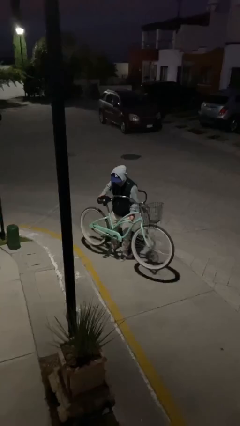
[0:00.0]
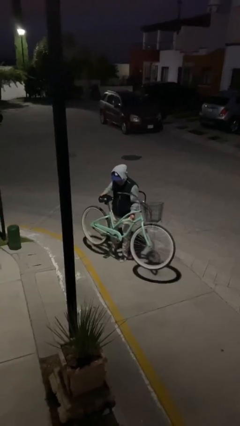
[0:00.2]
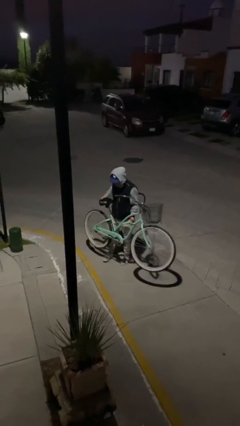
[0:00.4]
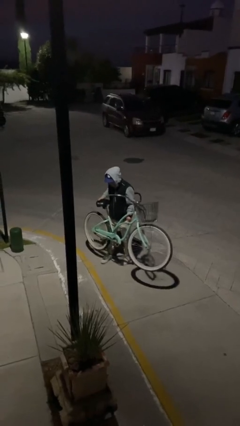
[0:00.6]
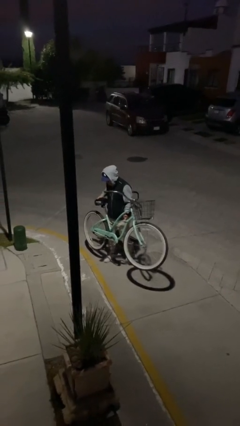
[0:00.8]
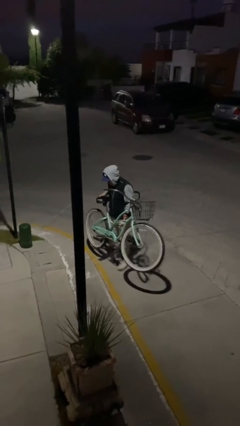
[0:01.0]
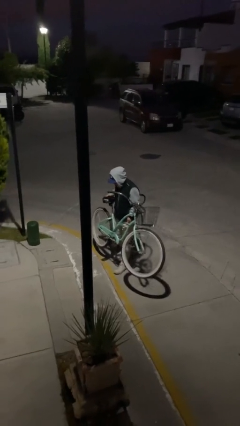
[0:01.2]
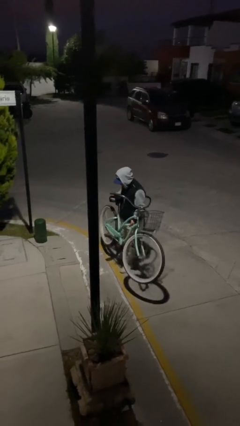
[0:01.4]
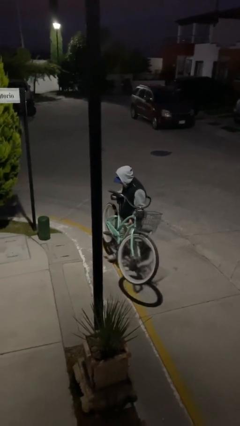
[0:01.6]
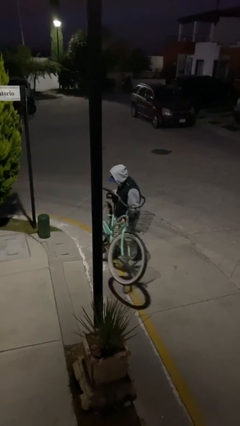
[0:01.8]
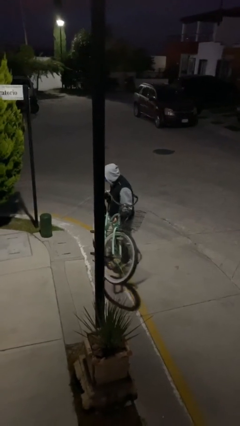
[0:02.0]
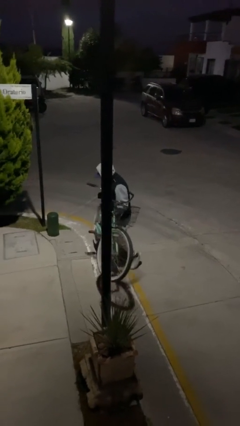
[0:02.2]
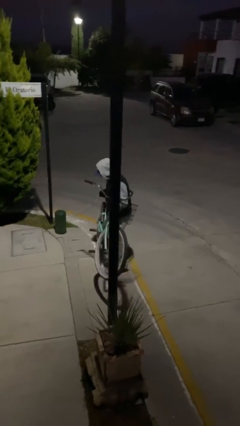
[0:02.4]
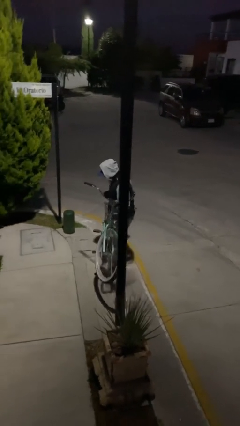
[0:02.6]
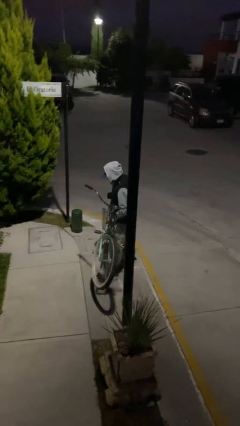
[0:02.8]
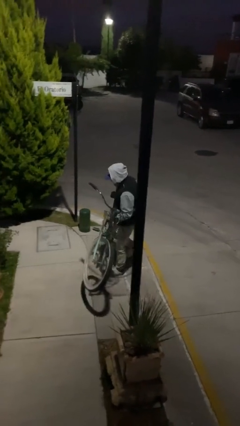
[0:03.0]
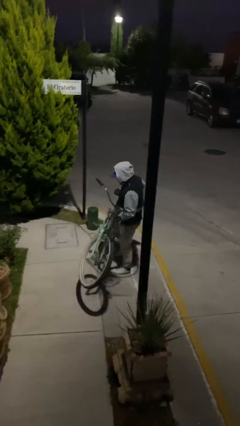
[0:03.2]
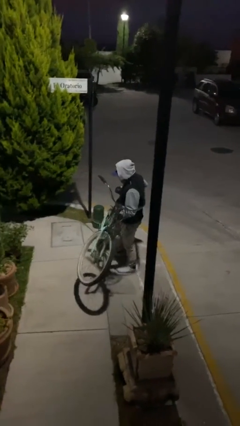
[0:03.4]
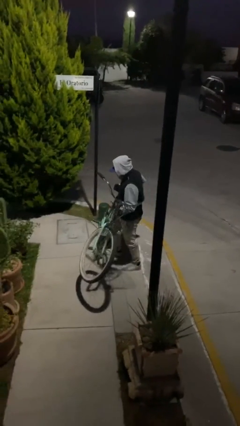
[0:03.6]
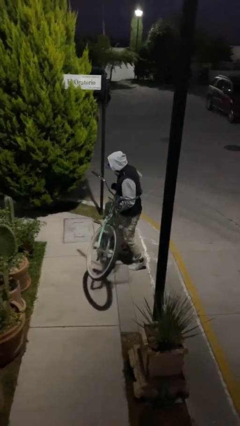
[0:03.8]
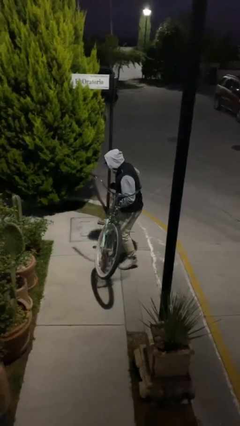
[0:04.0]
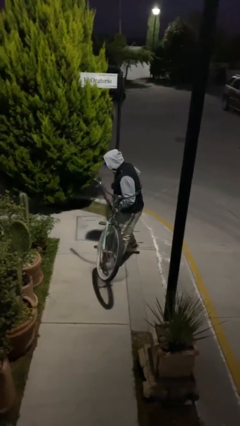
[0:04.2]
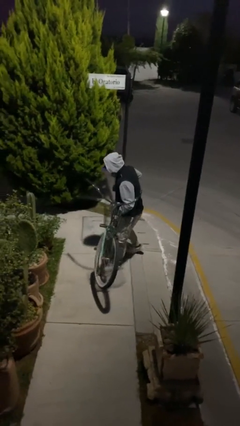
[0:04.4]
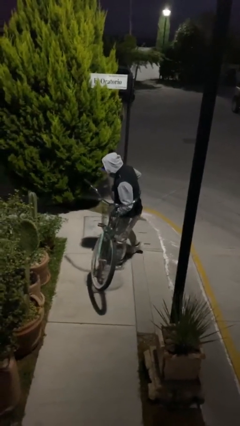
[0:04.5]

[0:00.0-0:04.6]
person carries heavy object

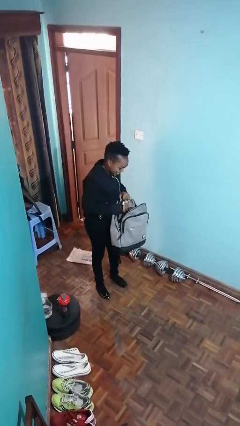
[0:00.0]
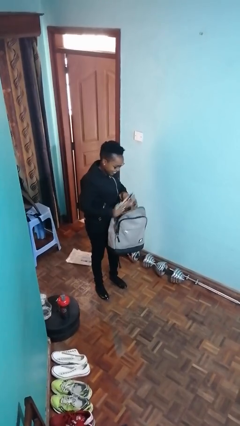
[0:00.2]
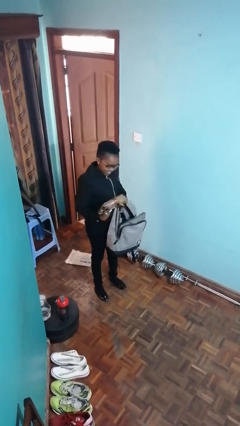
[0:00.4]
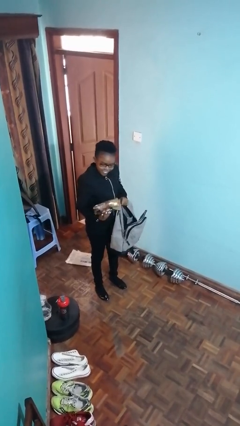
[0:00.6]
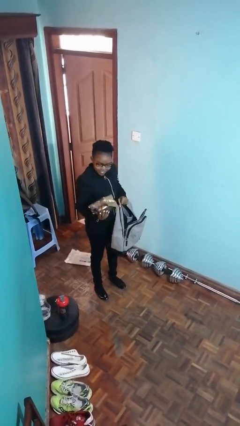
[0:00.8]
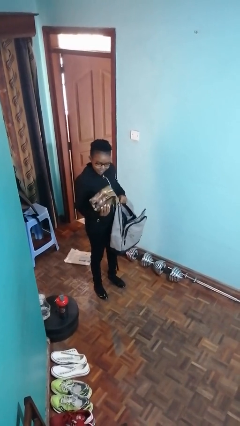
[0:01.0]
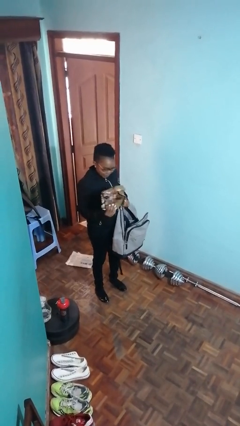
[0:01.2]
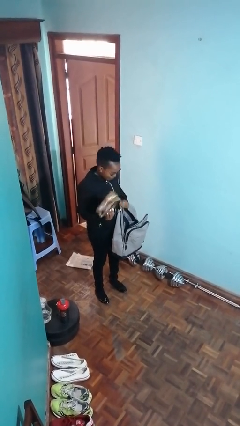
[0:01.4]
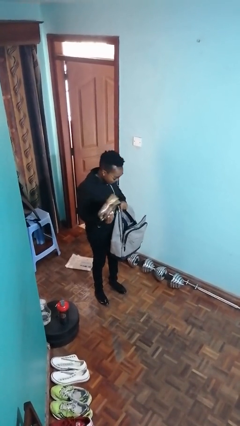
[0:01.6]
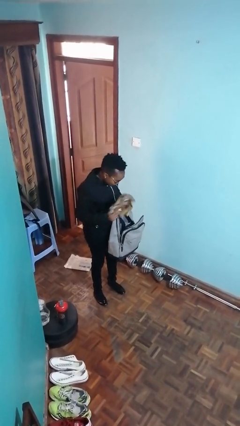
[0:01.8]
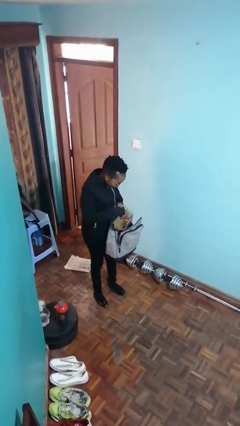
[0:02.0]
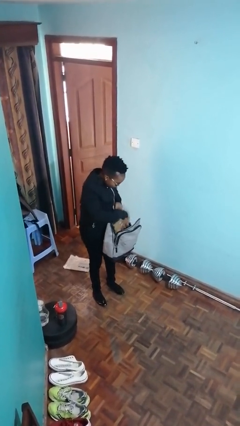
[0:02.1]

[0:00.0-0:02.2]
person takes object from backpack

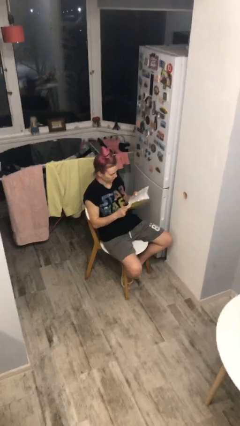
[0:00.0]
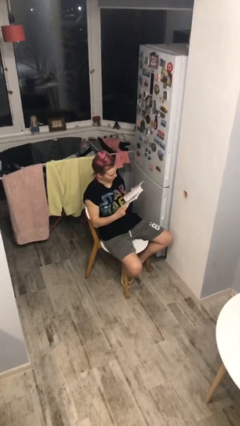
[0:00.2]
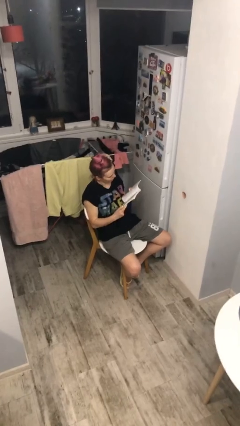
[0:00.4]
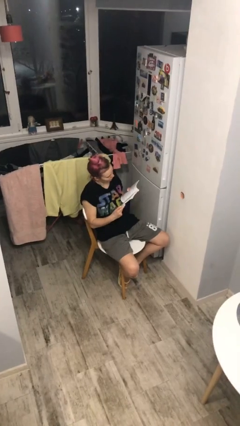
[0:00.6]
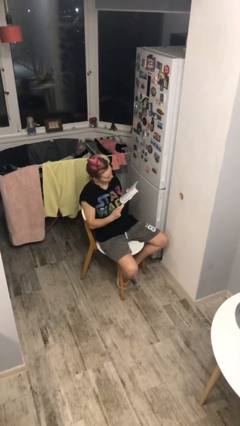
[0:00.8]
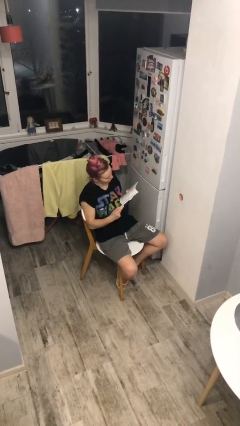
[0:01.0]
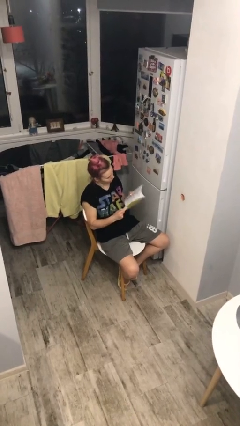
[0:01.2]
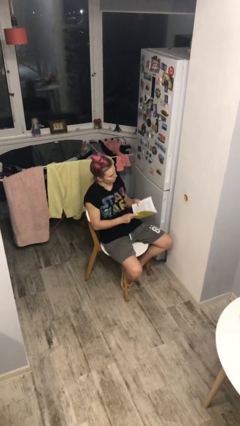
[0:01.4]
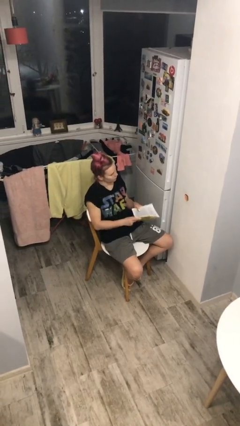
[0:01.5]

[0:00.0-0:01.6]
person reads document

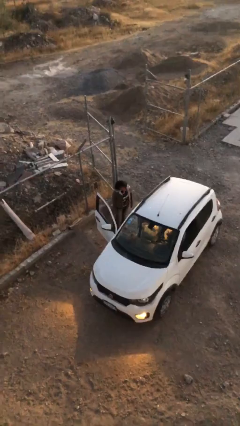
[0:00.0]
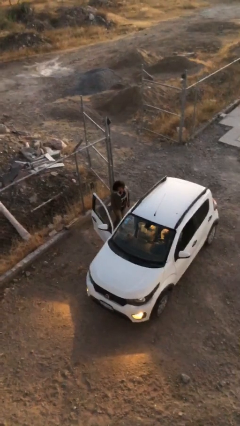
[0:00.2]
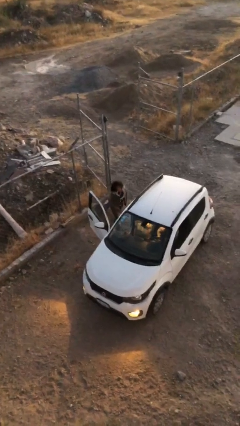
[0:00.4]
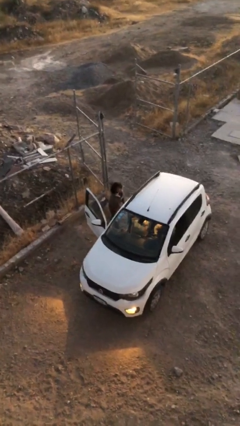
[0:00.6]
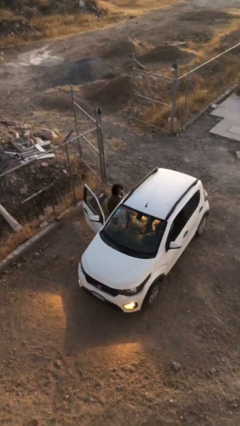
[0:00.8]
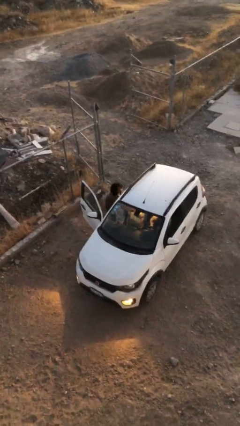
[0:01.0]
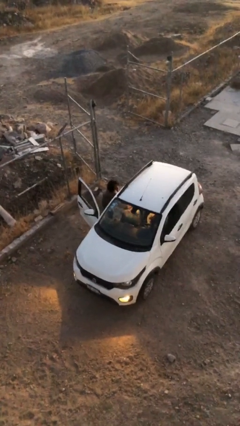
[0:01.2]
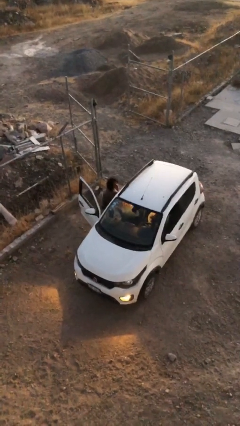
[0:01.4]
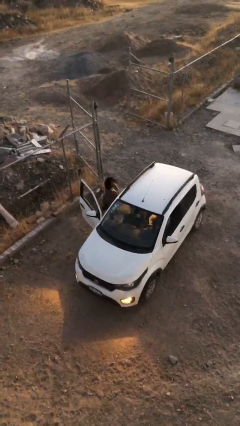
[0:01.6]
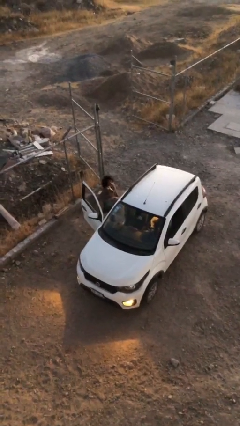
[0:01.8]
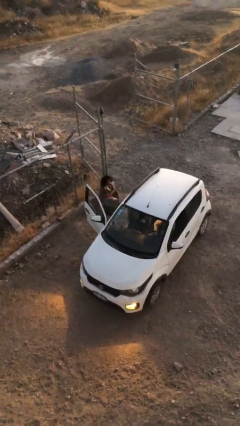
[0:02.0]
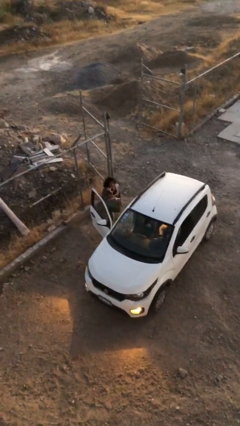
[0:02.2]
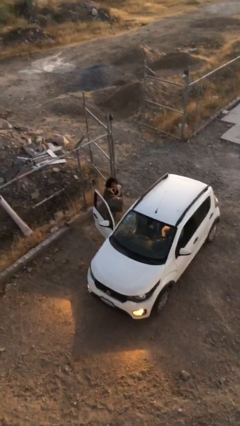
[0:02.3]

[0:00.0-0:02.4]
person unloads car

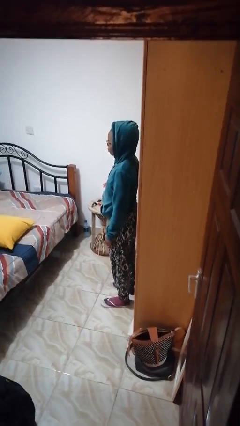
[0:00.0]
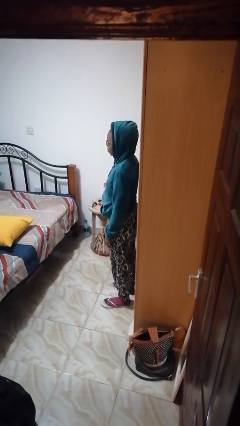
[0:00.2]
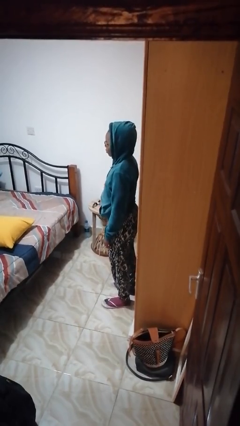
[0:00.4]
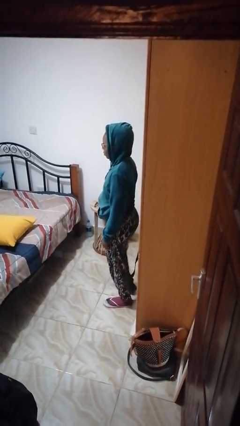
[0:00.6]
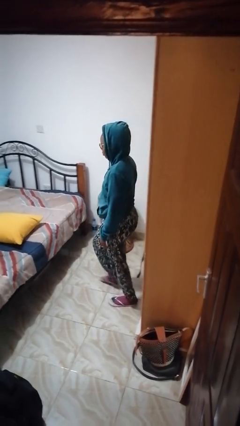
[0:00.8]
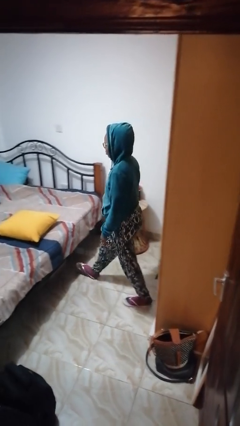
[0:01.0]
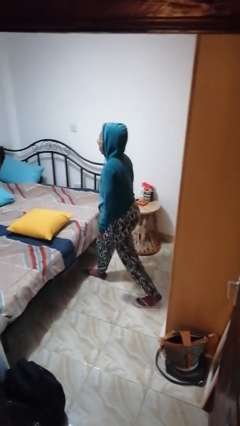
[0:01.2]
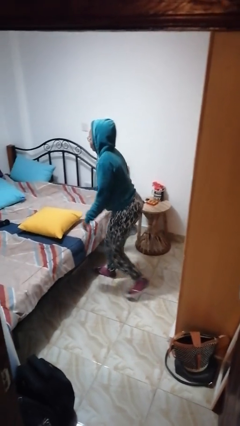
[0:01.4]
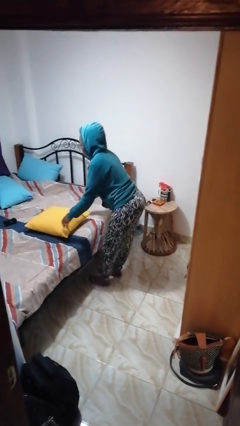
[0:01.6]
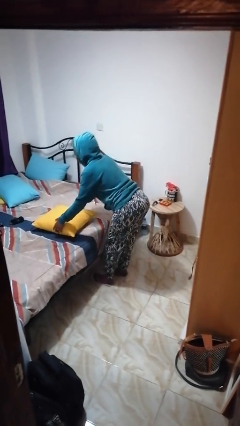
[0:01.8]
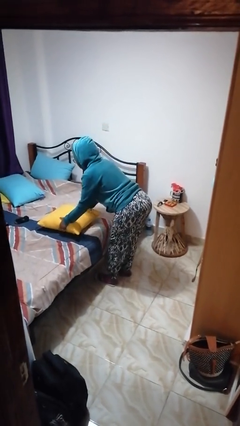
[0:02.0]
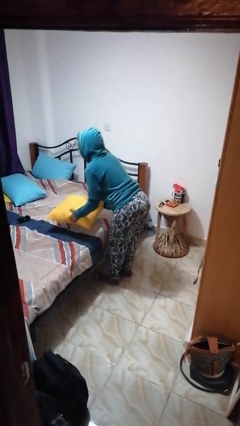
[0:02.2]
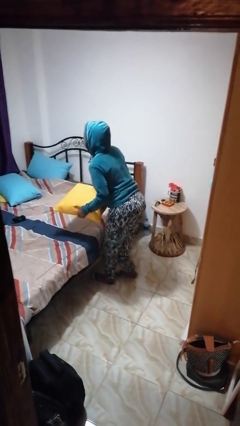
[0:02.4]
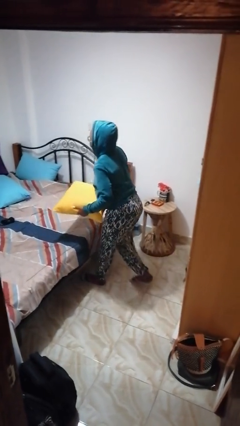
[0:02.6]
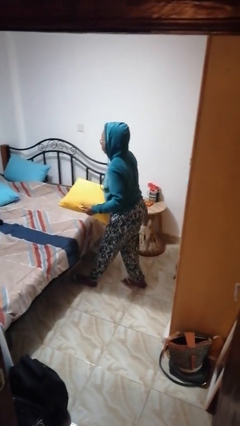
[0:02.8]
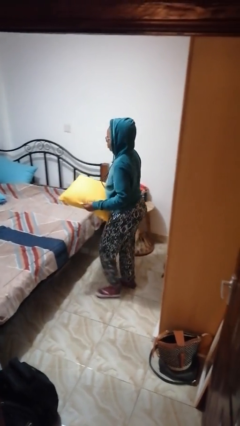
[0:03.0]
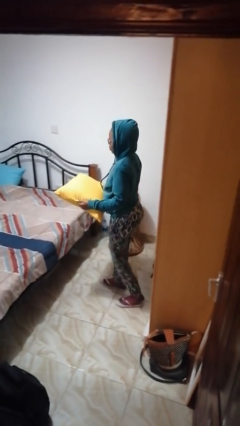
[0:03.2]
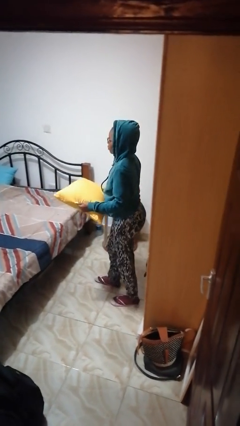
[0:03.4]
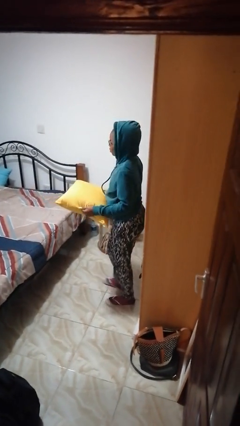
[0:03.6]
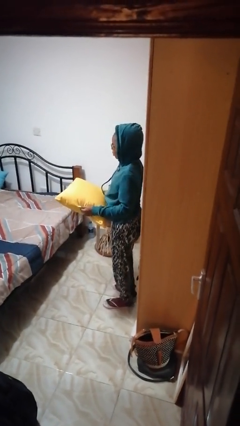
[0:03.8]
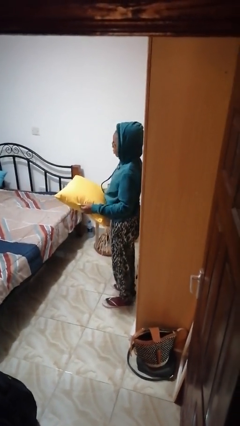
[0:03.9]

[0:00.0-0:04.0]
person picks up object from bed

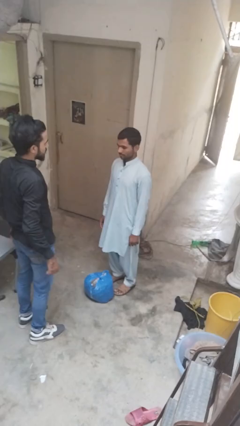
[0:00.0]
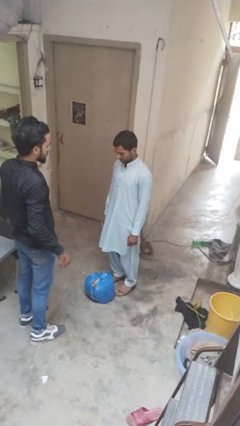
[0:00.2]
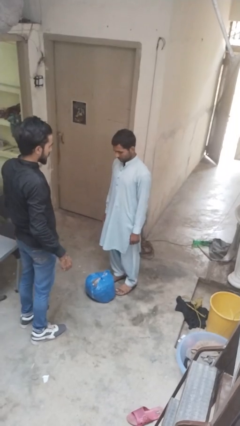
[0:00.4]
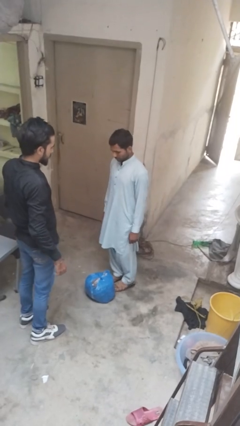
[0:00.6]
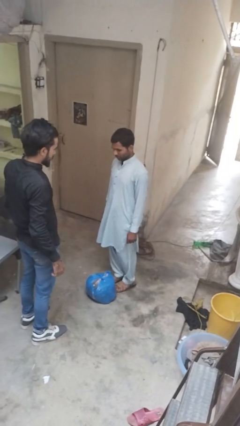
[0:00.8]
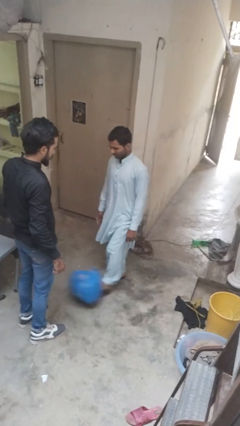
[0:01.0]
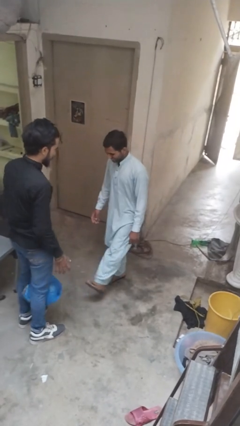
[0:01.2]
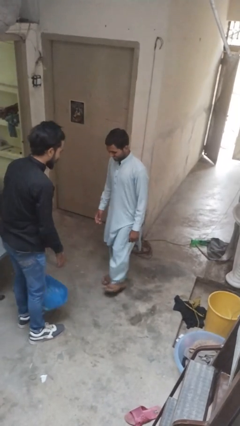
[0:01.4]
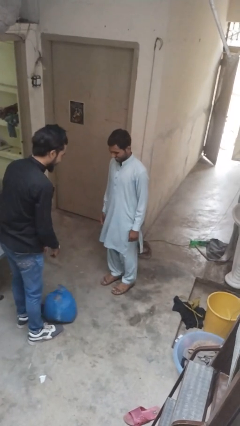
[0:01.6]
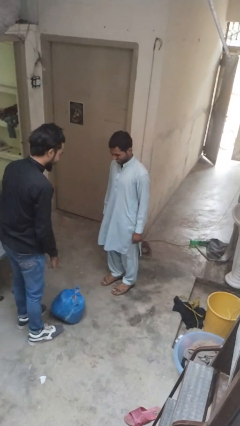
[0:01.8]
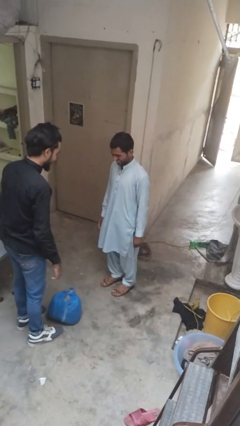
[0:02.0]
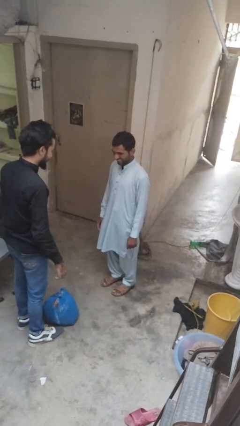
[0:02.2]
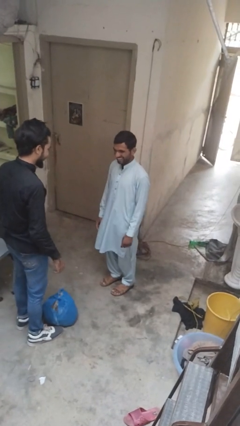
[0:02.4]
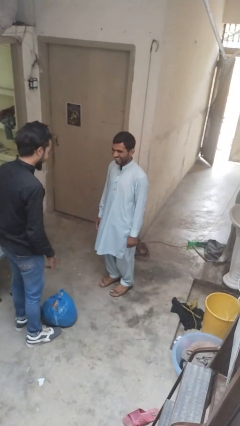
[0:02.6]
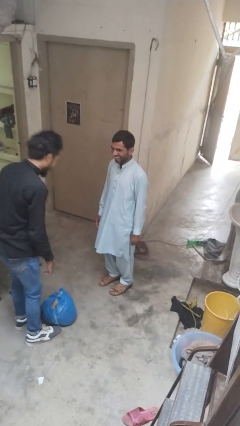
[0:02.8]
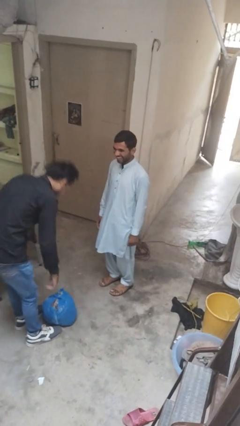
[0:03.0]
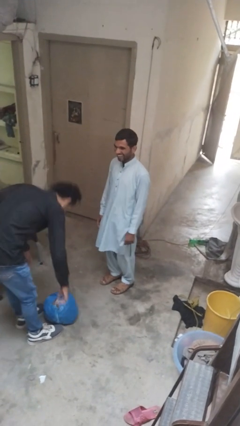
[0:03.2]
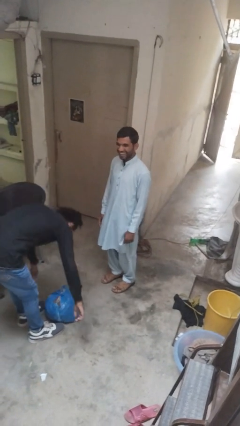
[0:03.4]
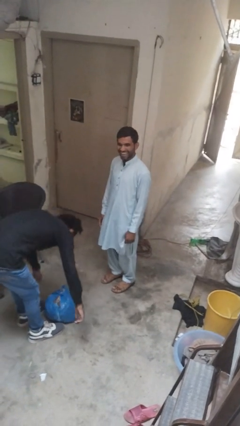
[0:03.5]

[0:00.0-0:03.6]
person kicks object to person
